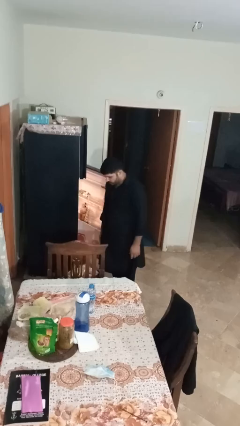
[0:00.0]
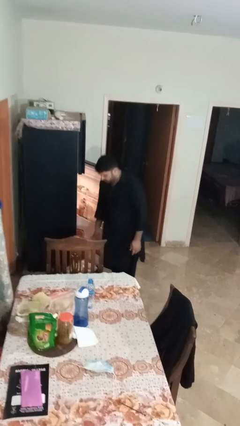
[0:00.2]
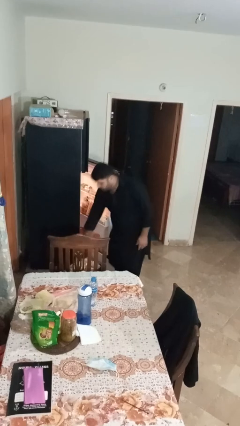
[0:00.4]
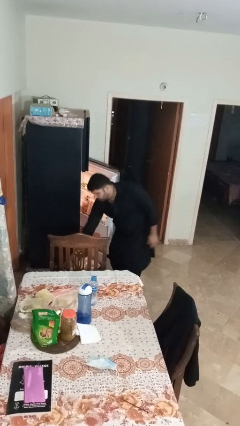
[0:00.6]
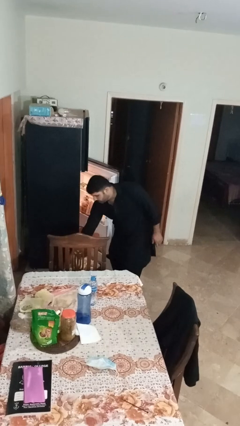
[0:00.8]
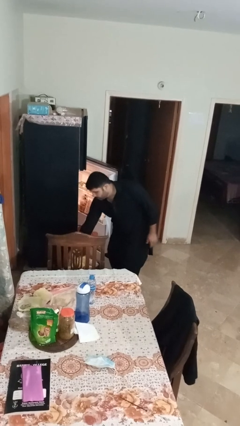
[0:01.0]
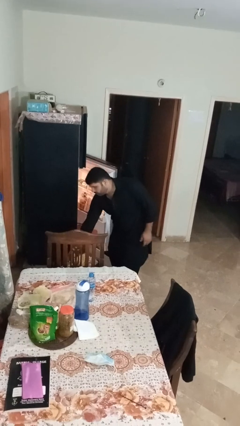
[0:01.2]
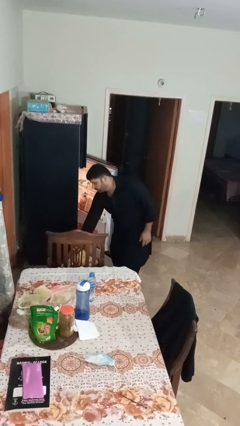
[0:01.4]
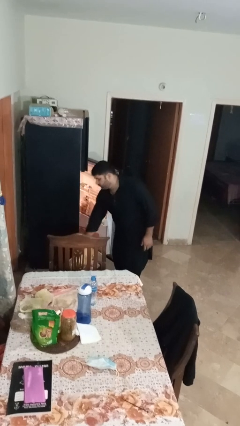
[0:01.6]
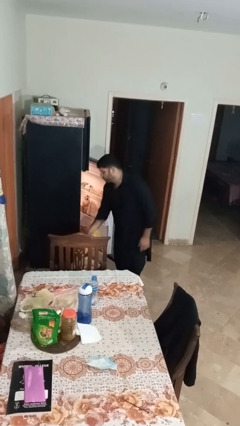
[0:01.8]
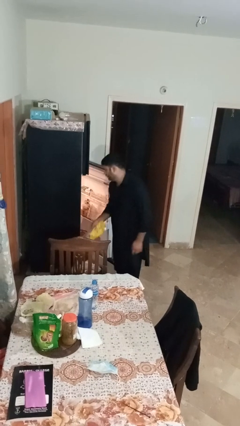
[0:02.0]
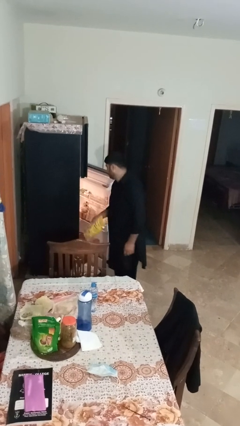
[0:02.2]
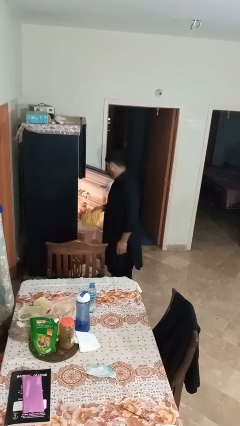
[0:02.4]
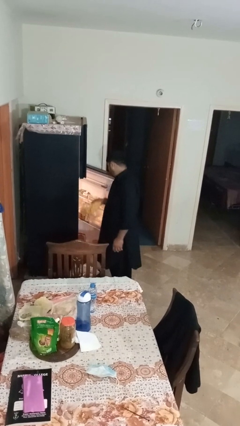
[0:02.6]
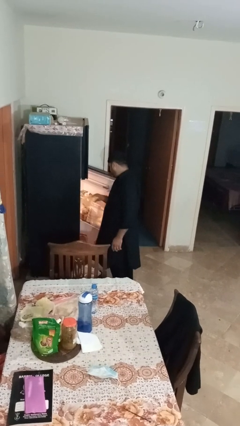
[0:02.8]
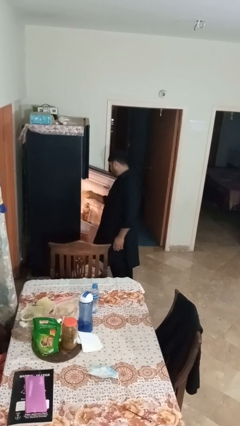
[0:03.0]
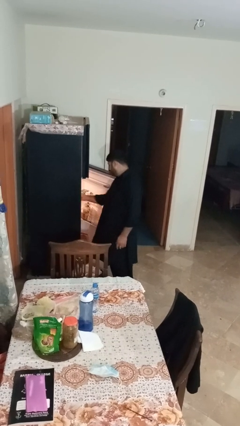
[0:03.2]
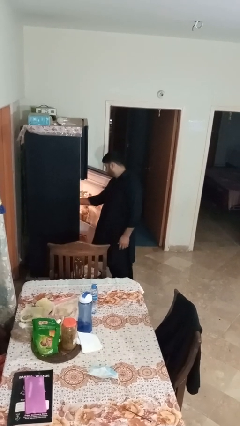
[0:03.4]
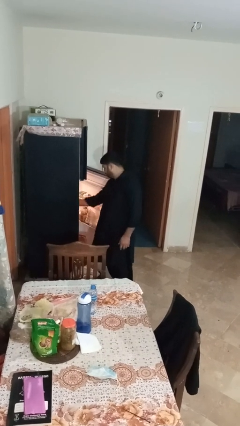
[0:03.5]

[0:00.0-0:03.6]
person loads groceries into refrigerator

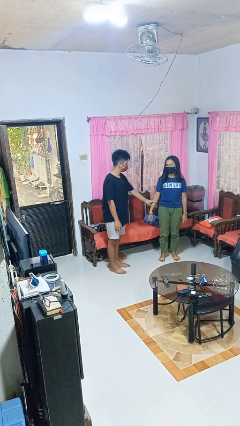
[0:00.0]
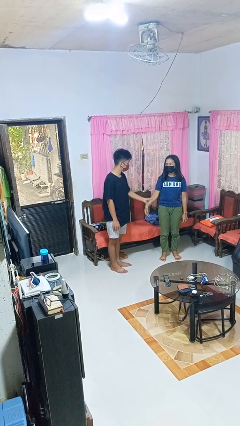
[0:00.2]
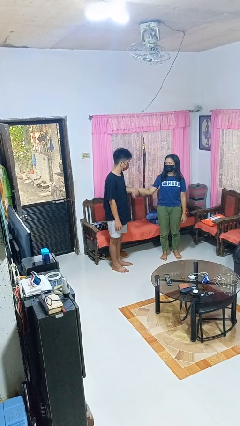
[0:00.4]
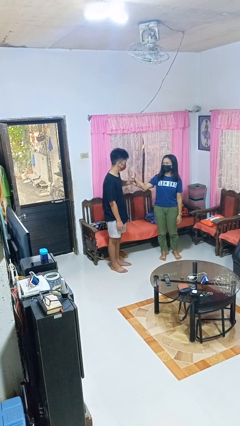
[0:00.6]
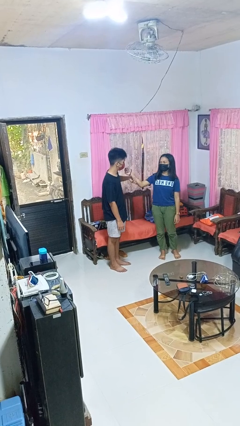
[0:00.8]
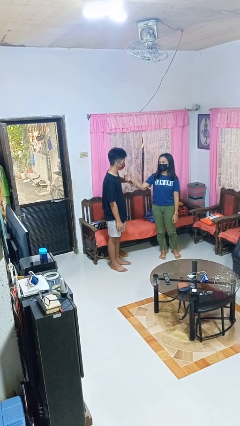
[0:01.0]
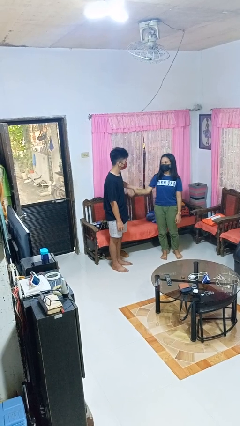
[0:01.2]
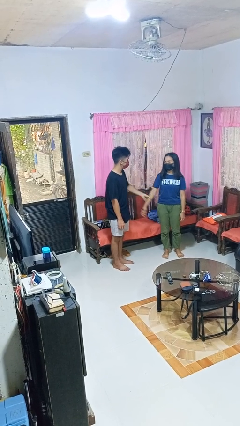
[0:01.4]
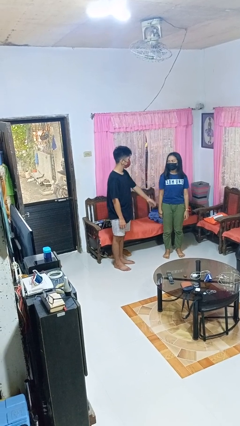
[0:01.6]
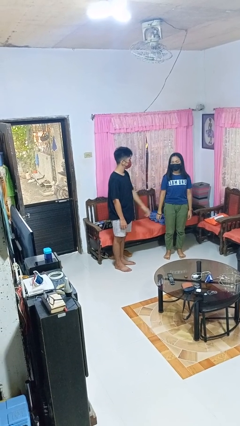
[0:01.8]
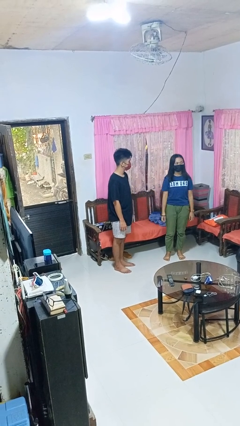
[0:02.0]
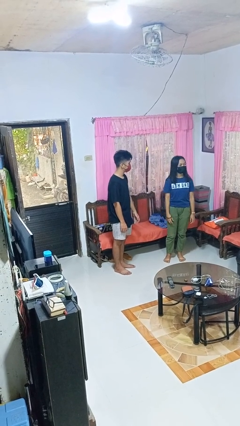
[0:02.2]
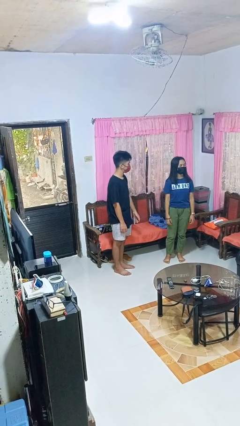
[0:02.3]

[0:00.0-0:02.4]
person grabs person by forearm

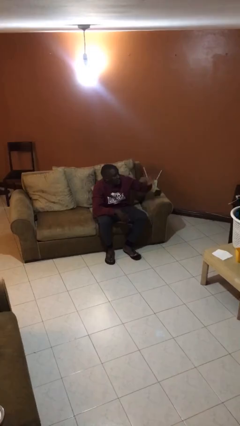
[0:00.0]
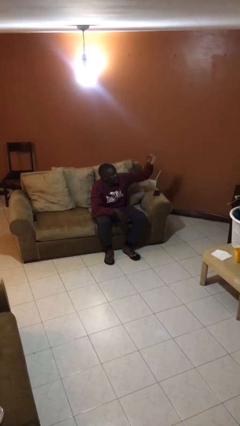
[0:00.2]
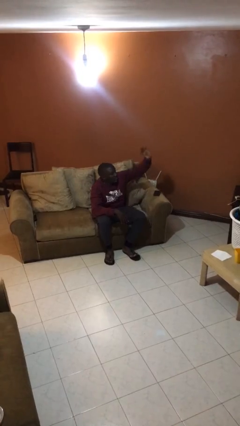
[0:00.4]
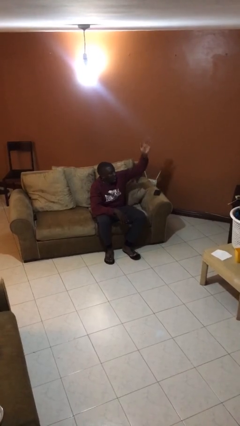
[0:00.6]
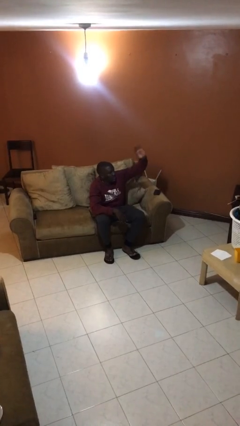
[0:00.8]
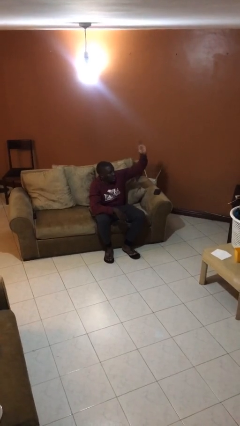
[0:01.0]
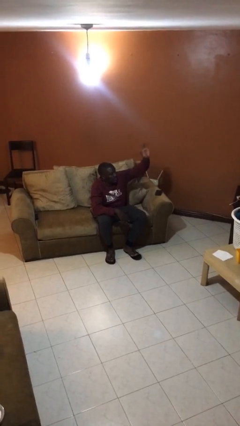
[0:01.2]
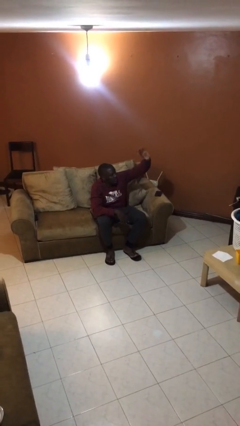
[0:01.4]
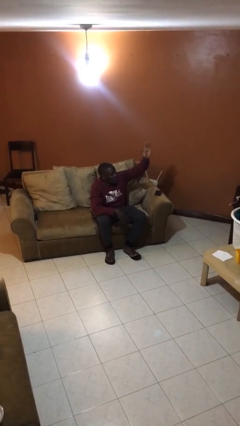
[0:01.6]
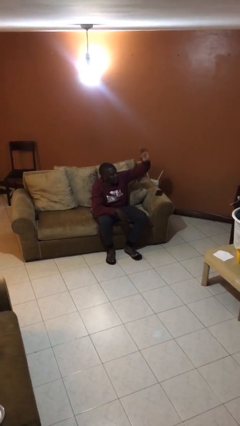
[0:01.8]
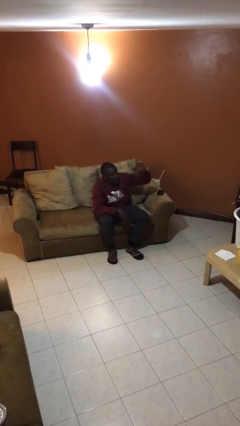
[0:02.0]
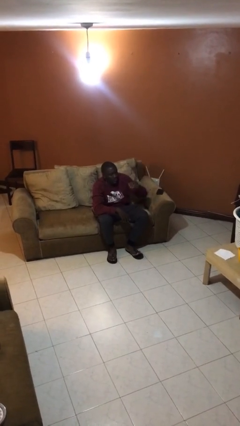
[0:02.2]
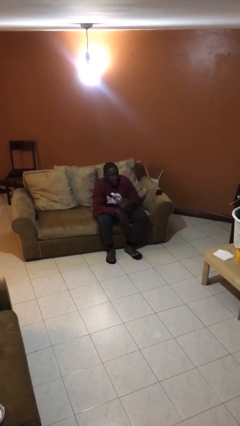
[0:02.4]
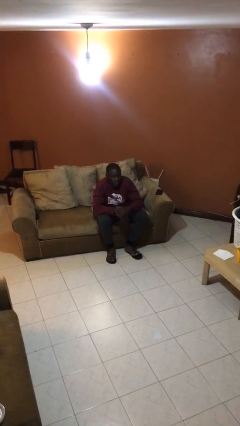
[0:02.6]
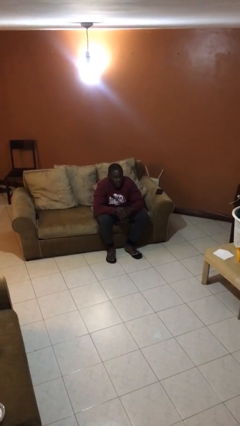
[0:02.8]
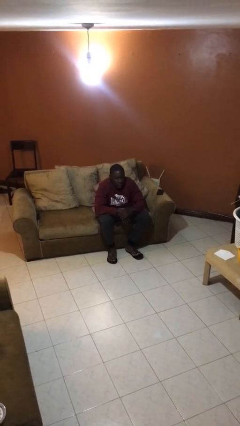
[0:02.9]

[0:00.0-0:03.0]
person waves at person

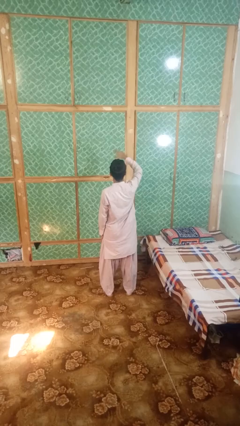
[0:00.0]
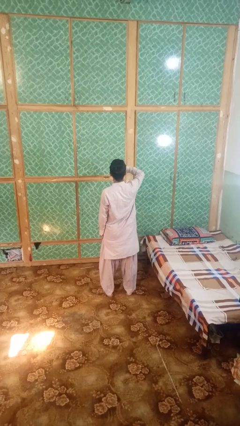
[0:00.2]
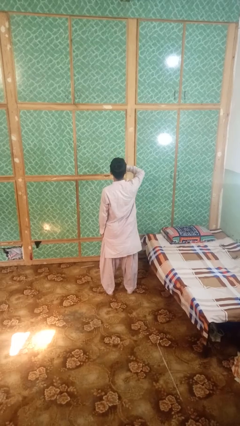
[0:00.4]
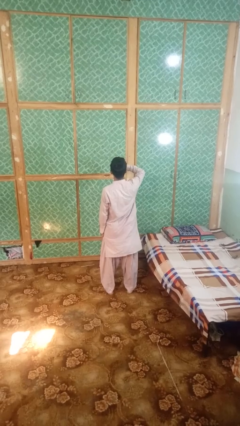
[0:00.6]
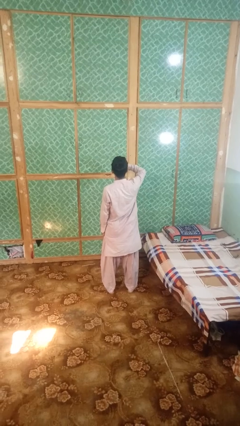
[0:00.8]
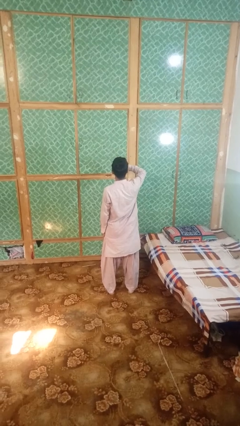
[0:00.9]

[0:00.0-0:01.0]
person gestures swipe down

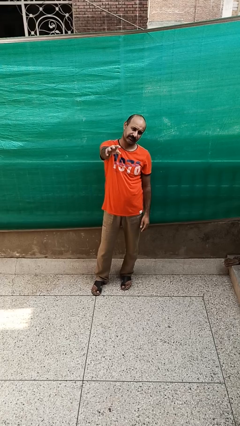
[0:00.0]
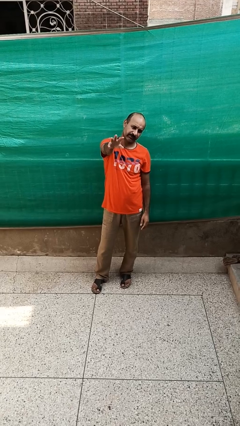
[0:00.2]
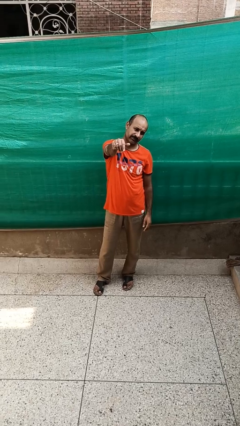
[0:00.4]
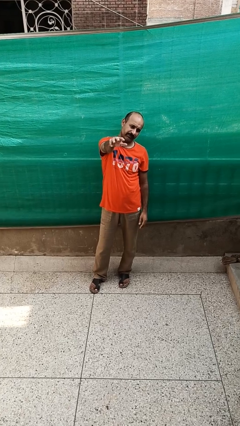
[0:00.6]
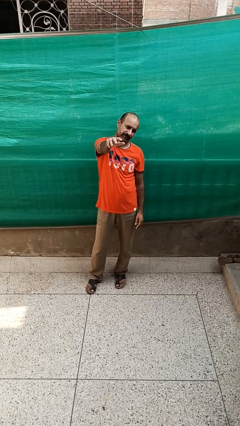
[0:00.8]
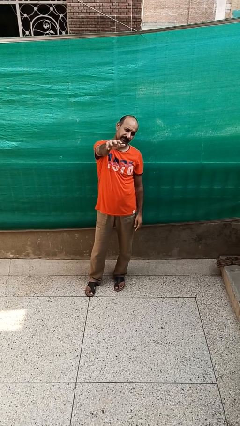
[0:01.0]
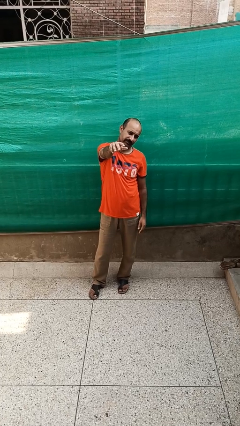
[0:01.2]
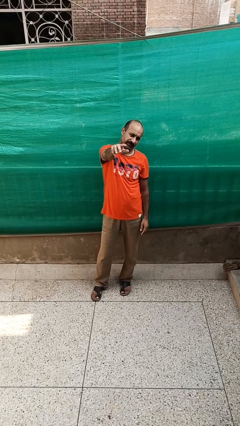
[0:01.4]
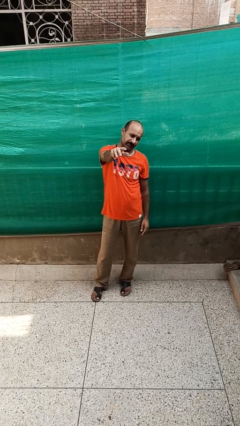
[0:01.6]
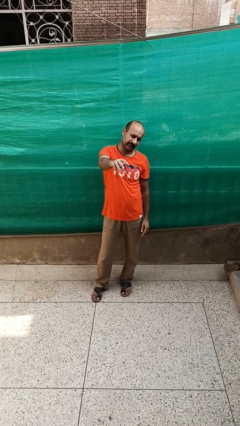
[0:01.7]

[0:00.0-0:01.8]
person gestures come here

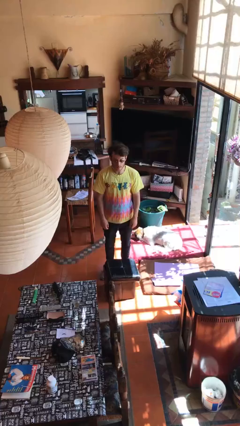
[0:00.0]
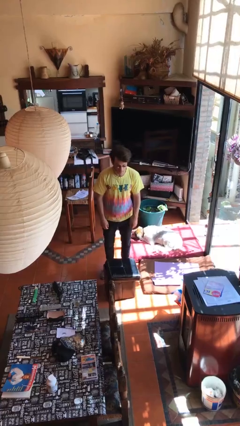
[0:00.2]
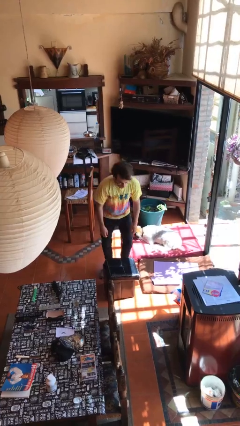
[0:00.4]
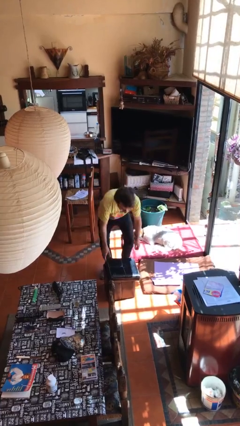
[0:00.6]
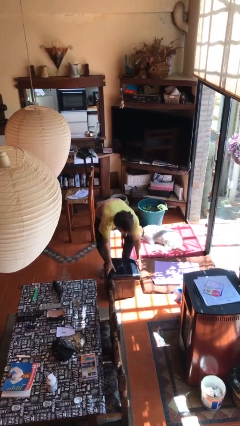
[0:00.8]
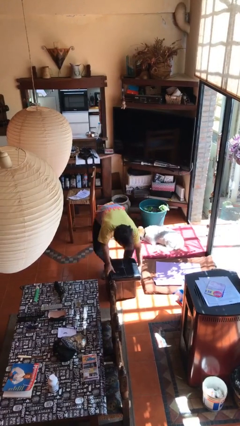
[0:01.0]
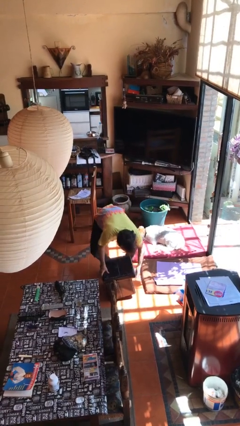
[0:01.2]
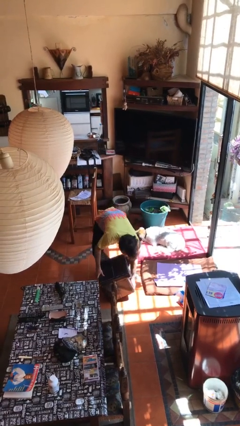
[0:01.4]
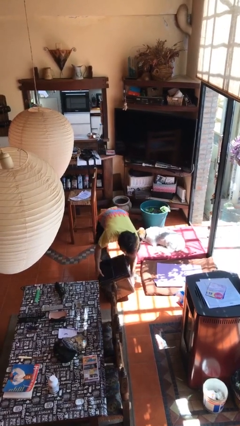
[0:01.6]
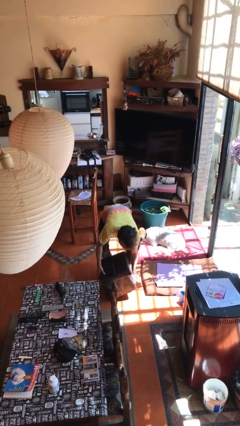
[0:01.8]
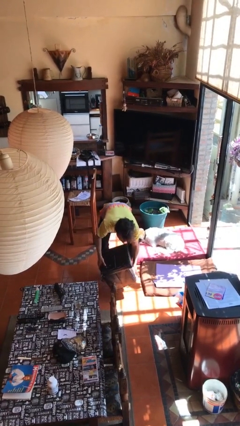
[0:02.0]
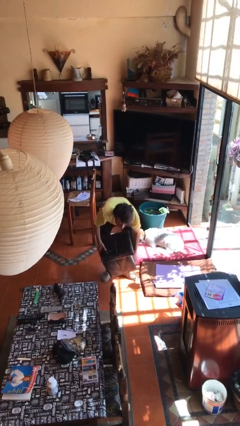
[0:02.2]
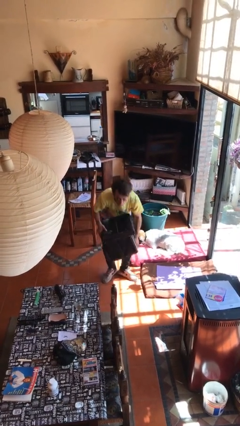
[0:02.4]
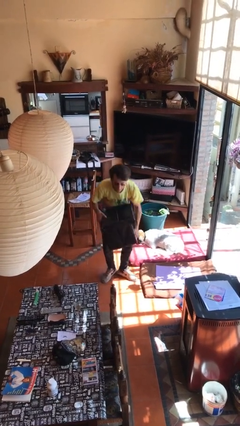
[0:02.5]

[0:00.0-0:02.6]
person picks up object from floor

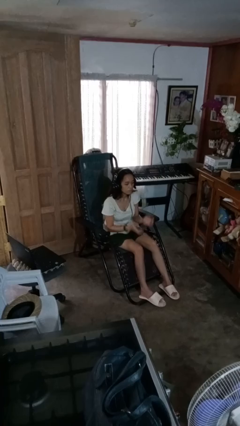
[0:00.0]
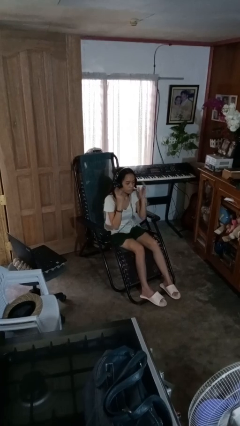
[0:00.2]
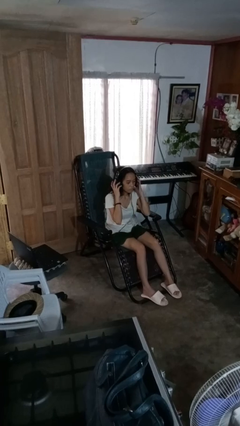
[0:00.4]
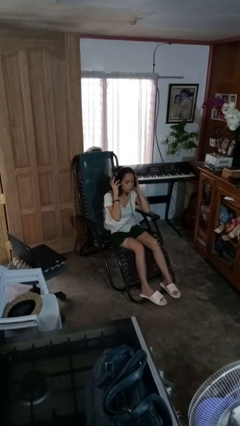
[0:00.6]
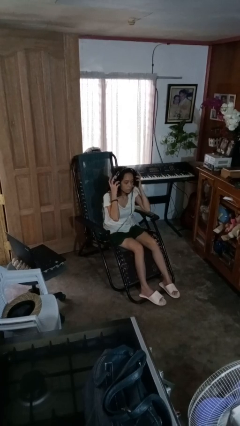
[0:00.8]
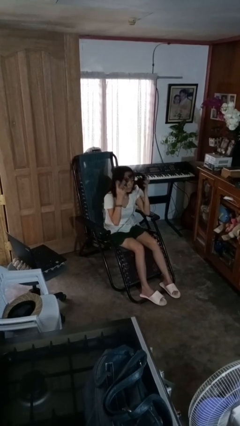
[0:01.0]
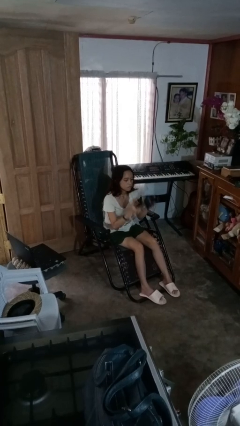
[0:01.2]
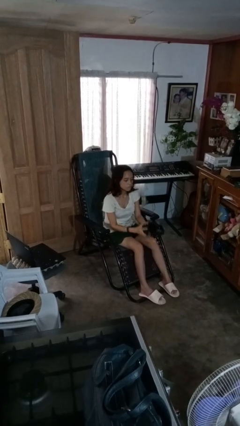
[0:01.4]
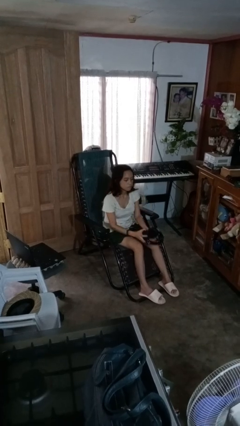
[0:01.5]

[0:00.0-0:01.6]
person takes off headphones

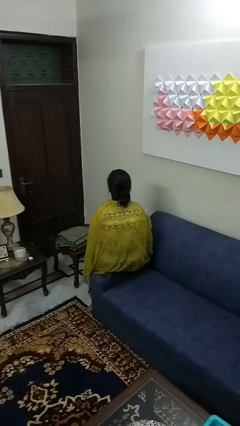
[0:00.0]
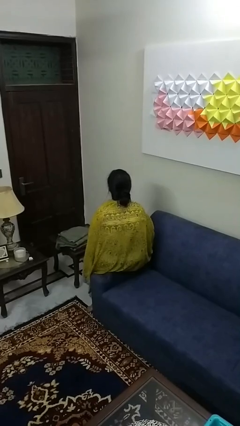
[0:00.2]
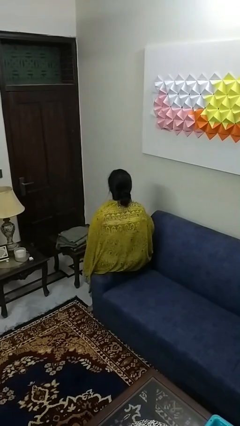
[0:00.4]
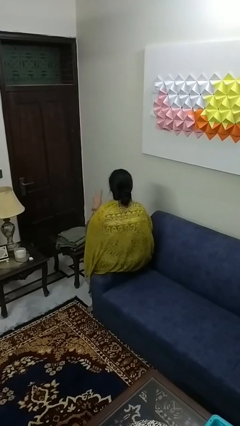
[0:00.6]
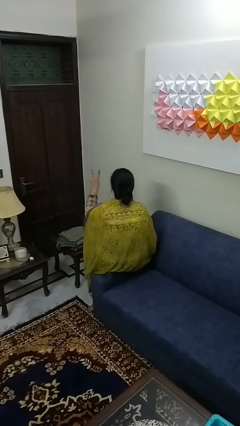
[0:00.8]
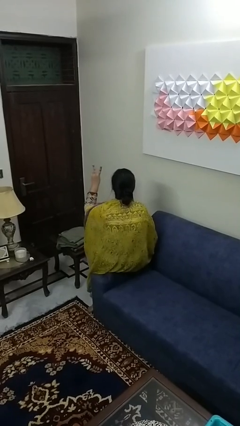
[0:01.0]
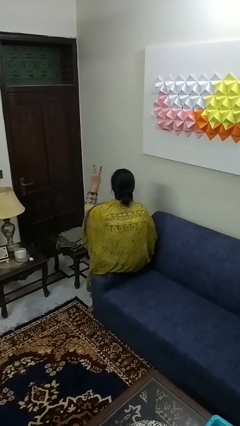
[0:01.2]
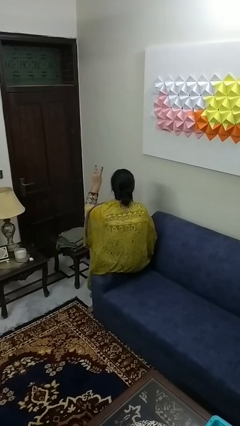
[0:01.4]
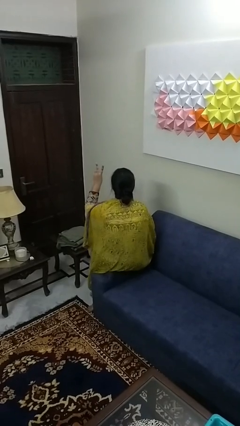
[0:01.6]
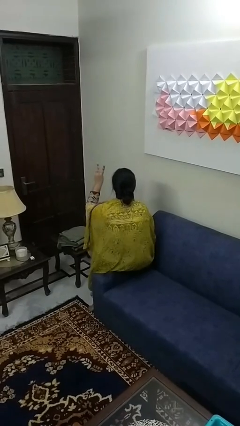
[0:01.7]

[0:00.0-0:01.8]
person gestures peace
